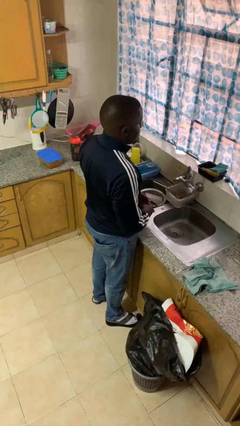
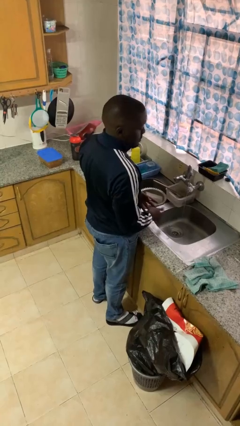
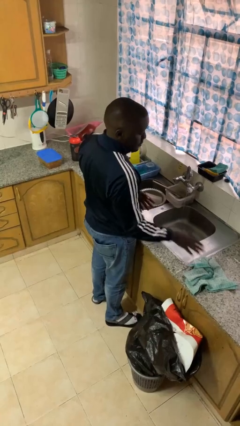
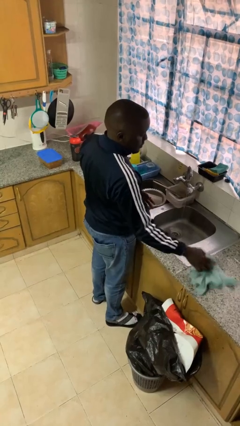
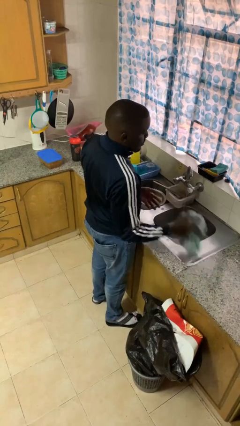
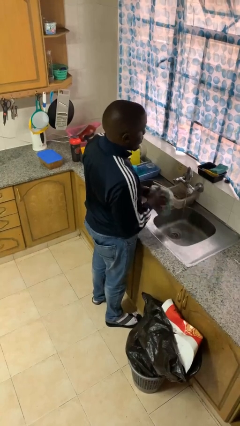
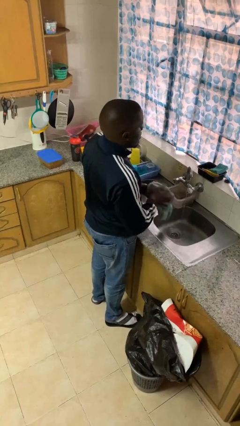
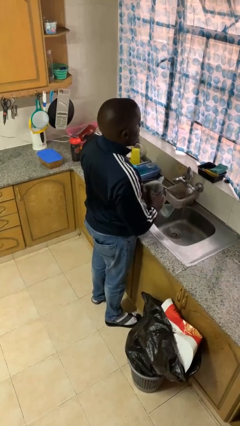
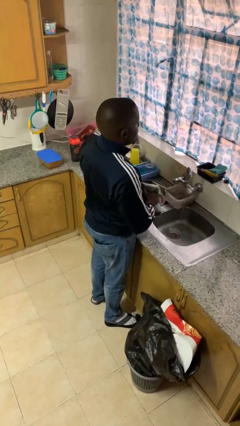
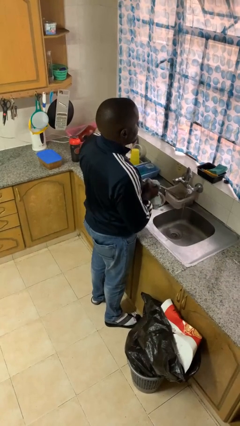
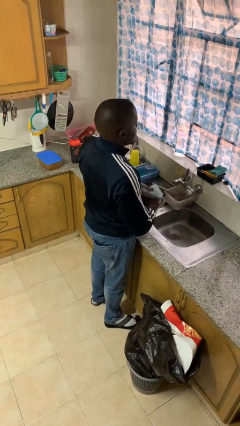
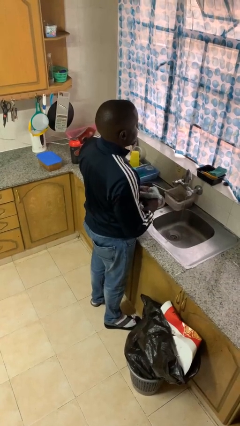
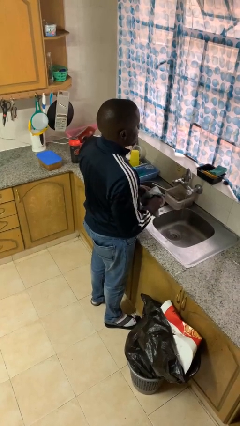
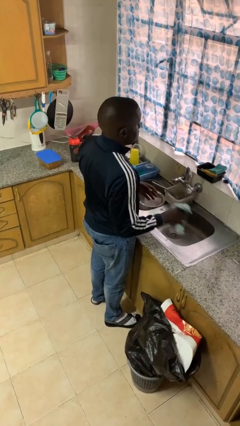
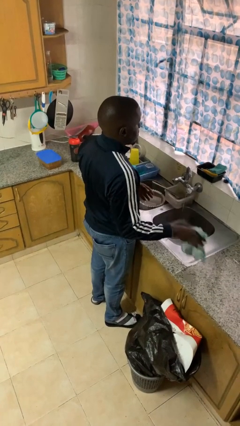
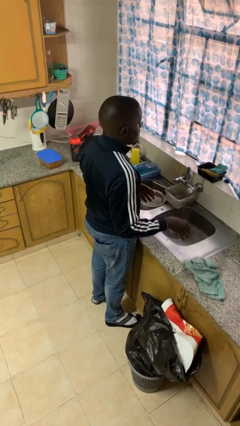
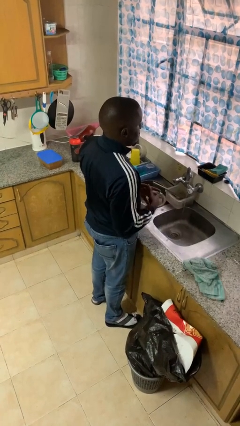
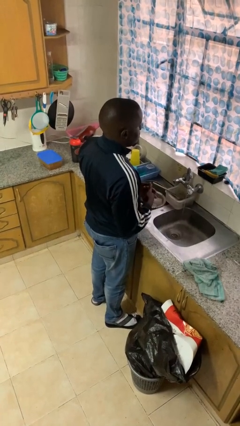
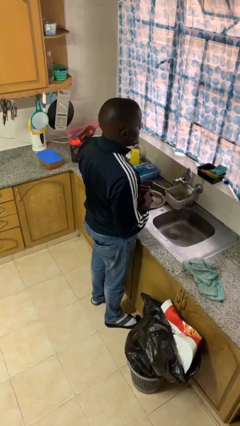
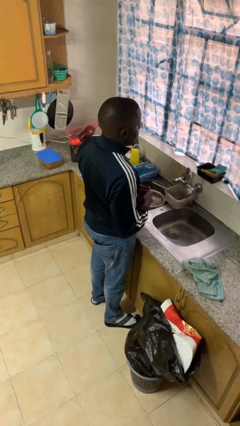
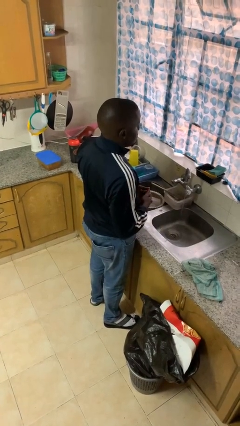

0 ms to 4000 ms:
person dries hands with towel

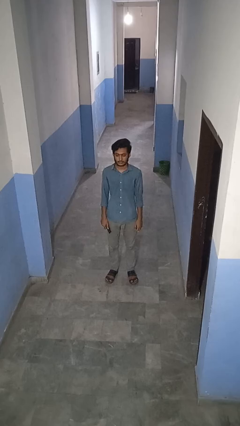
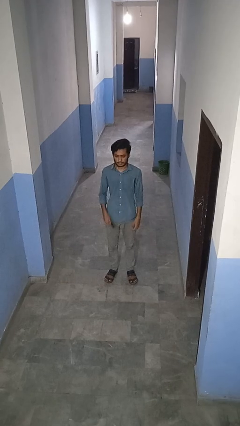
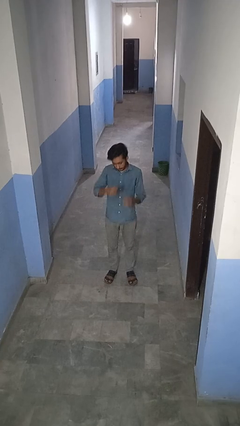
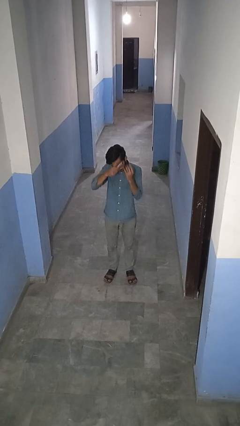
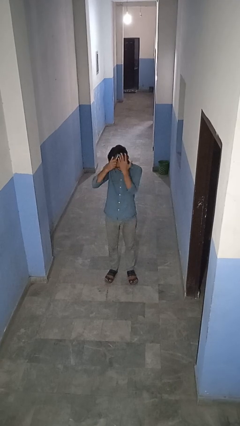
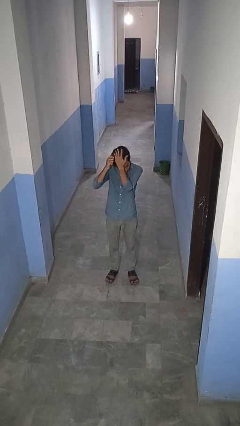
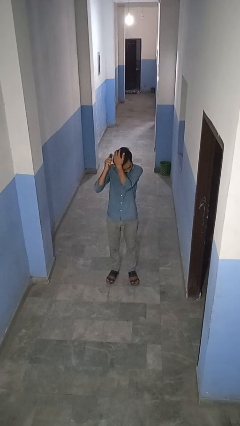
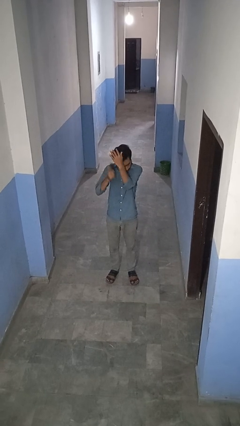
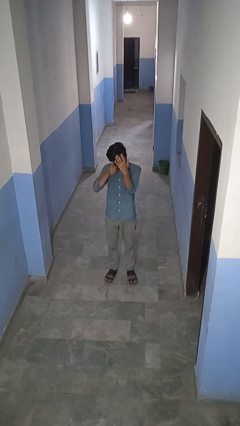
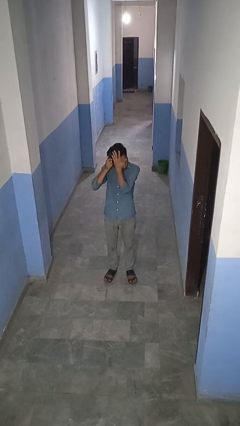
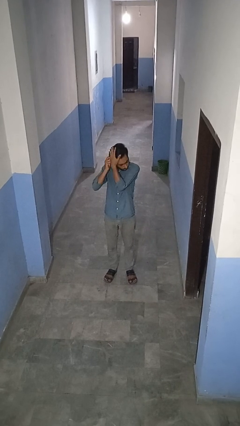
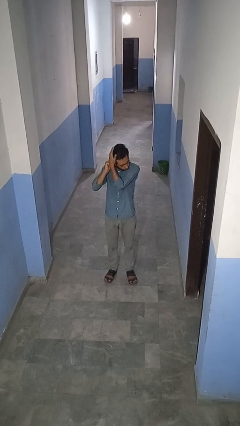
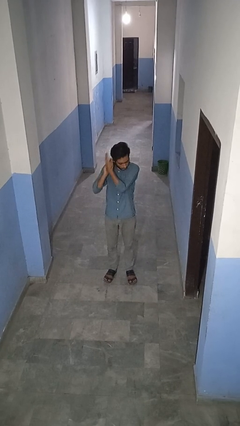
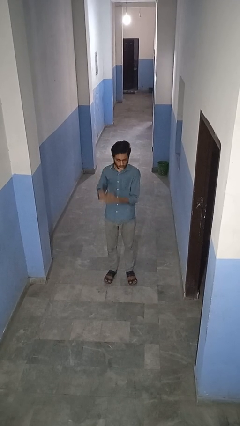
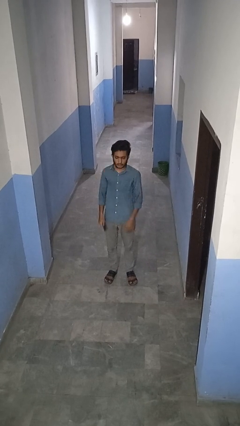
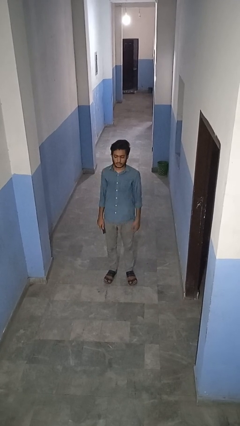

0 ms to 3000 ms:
person brushes hair

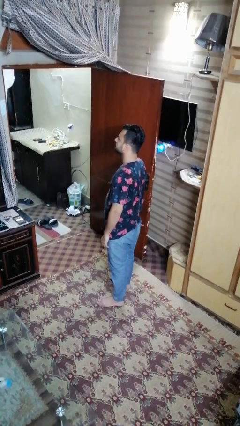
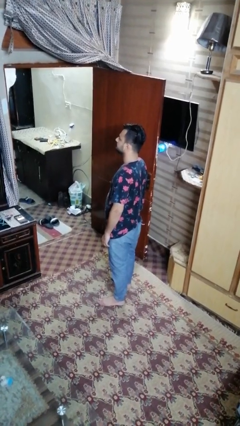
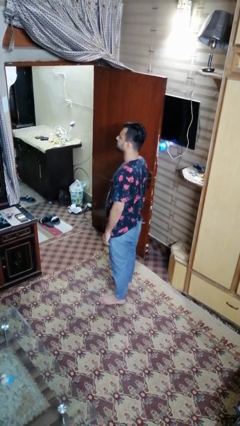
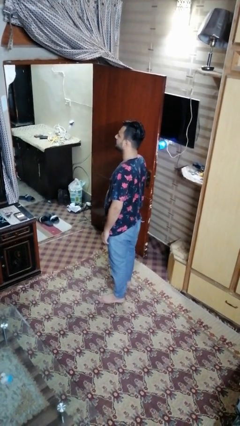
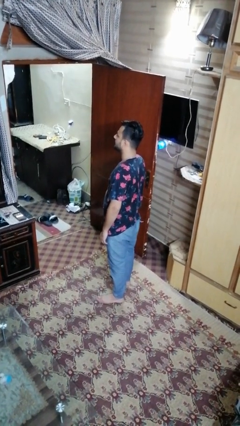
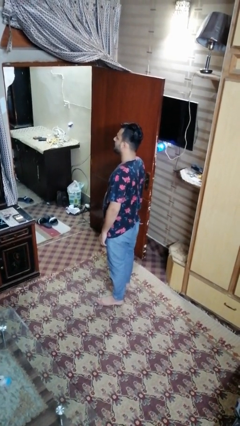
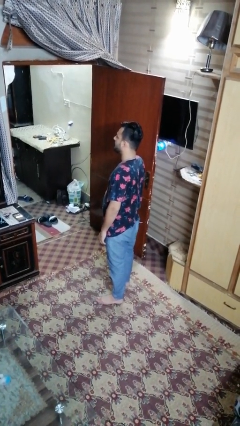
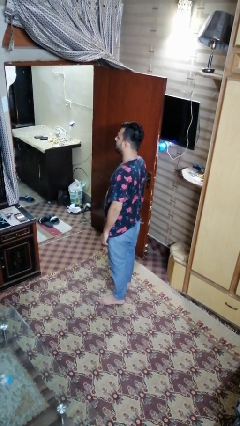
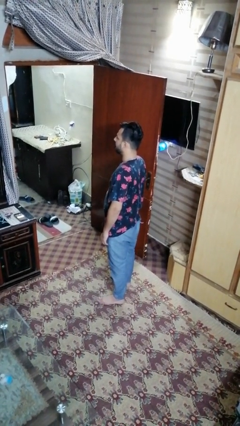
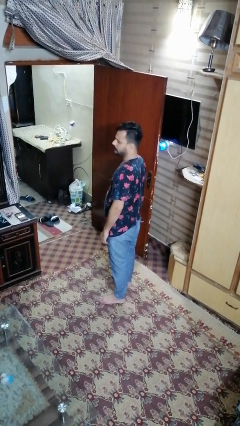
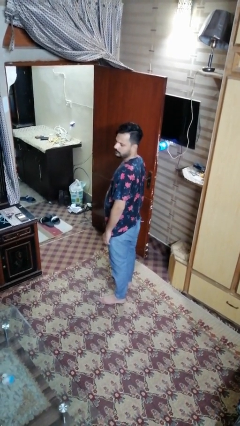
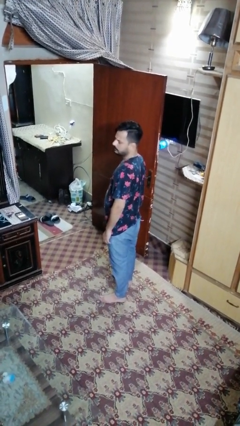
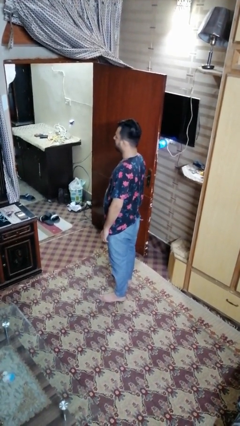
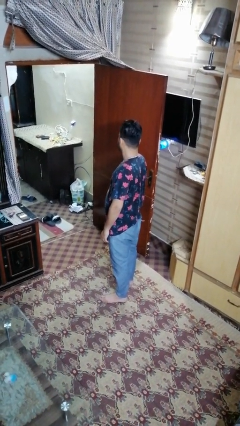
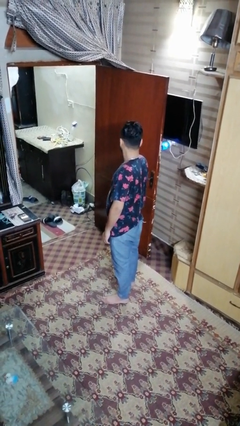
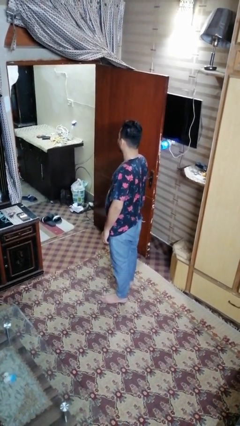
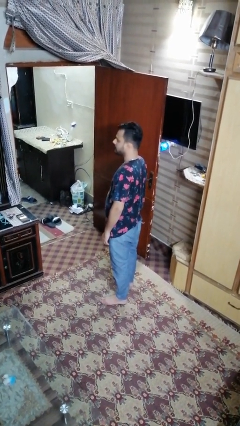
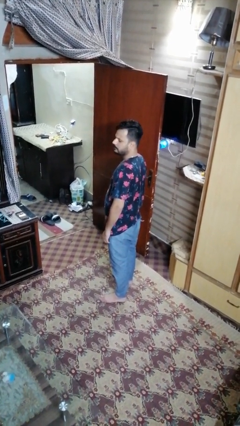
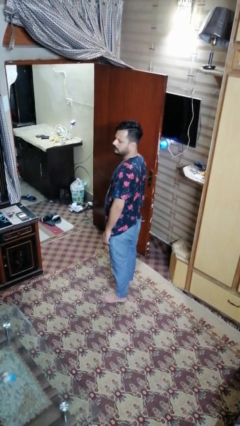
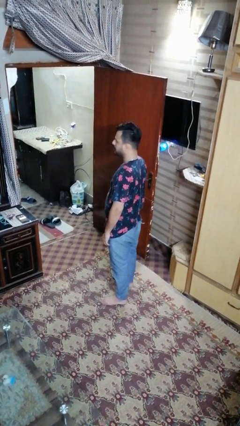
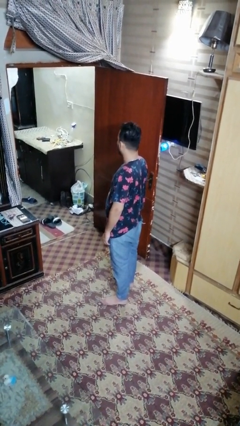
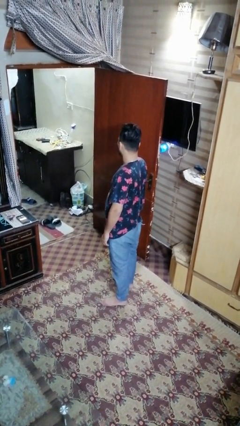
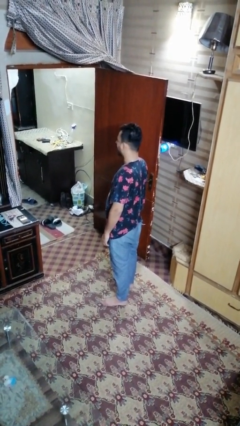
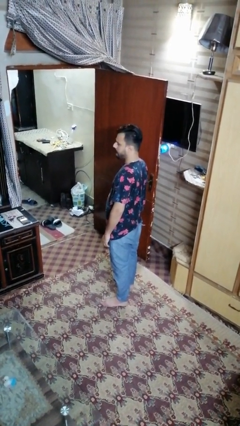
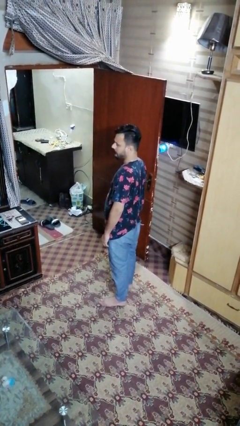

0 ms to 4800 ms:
person shakes head

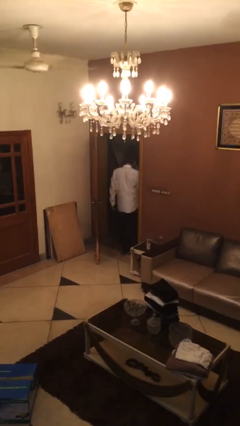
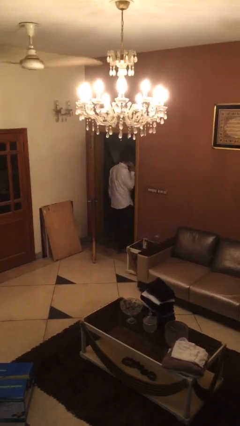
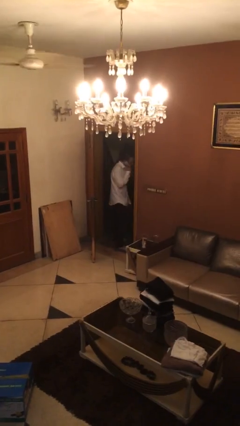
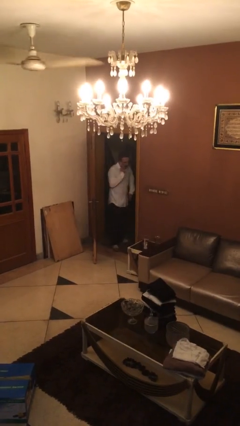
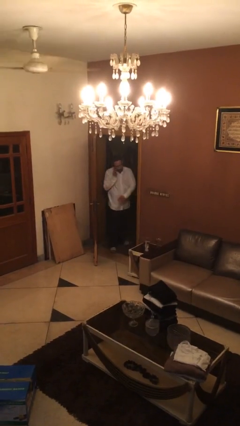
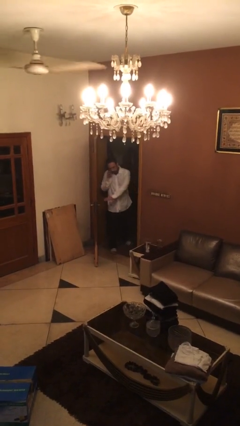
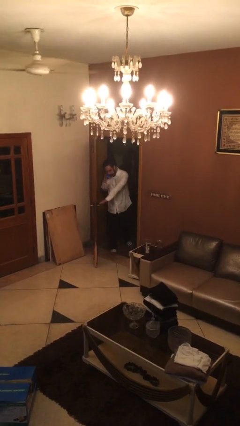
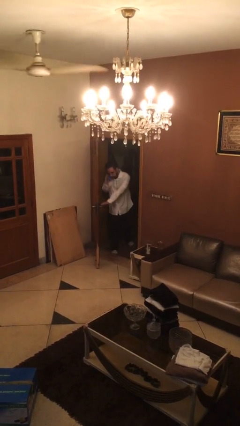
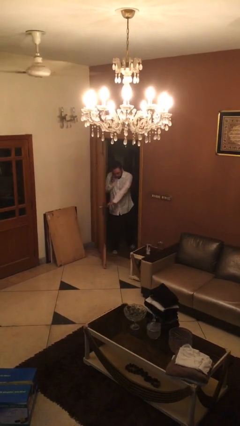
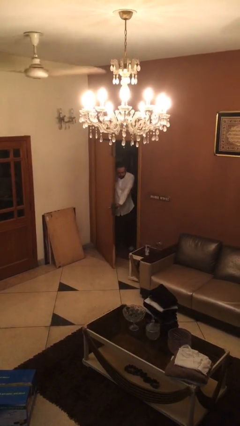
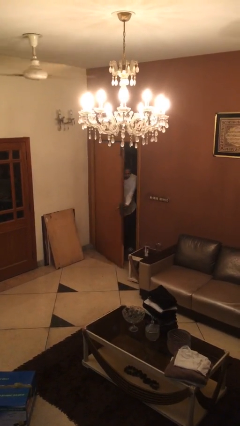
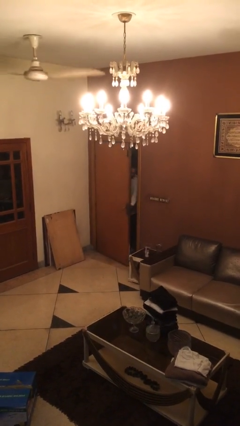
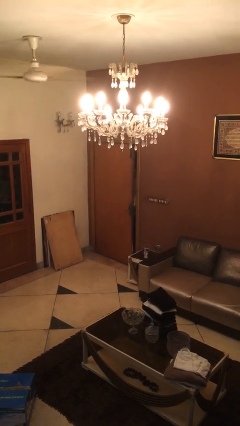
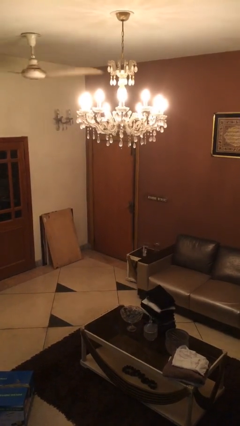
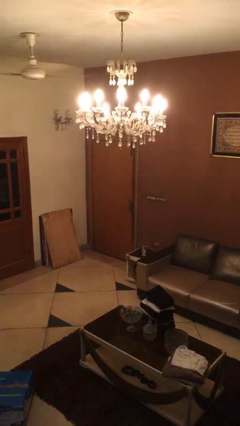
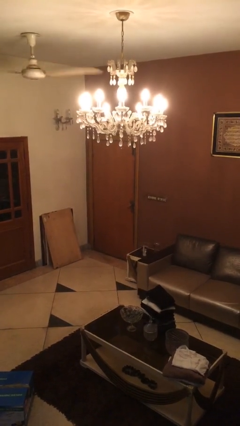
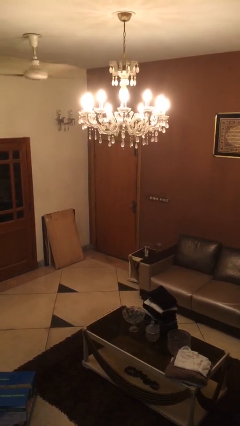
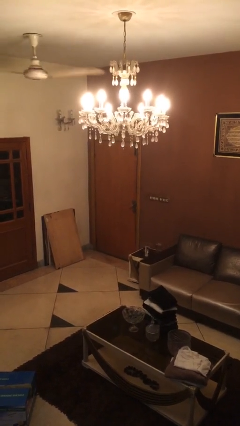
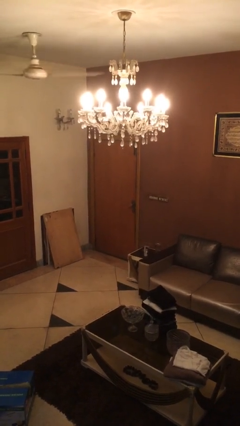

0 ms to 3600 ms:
person closes facility door

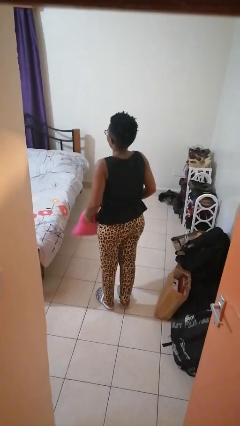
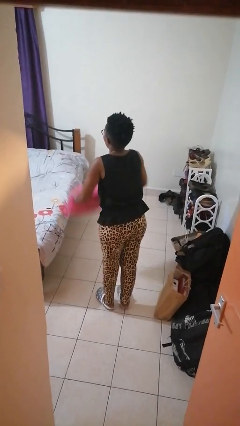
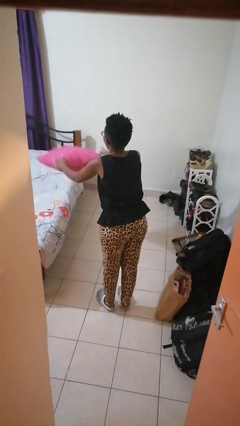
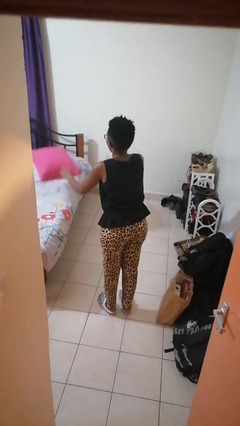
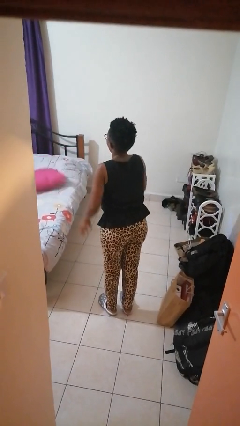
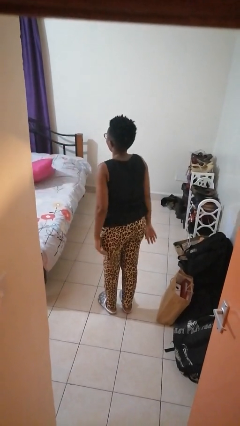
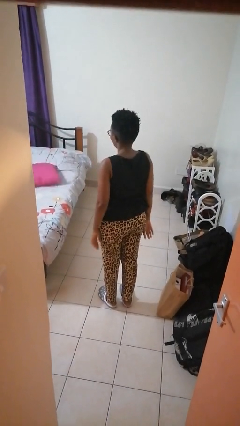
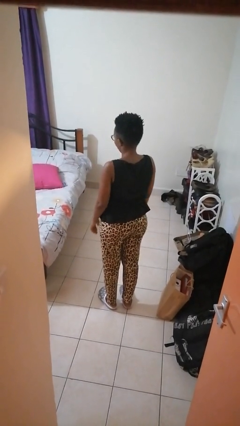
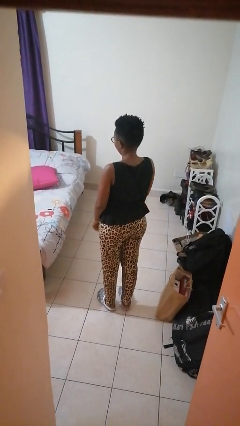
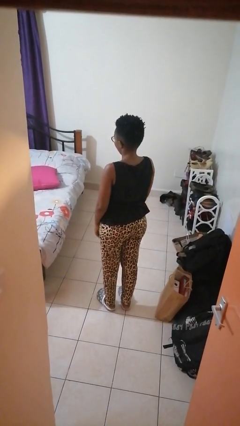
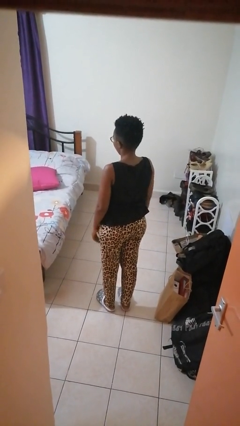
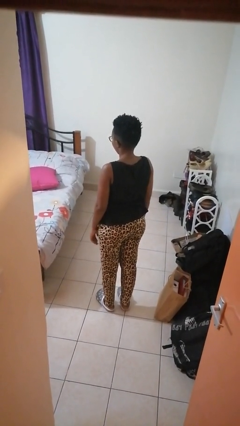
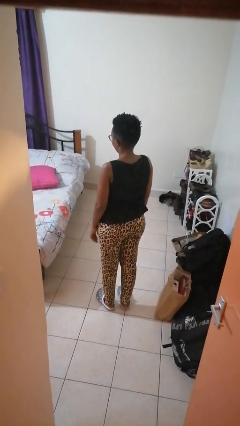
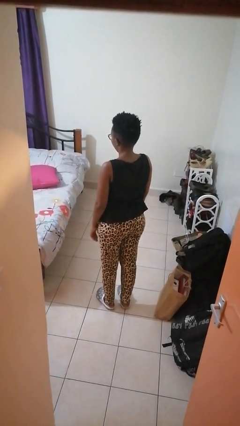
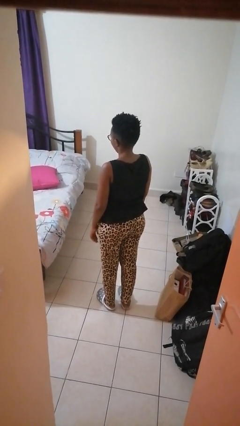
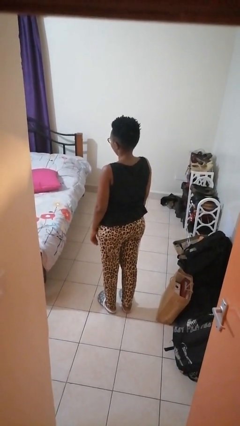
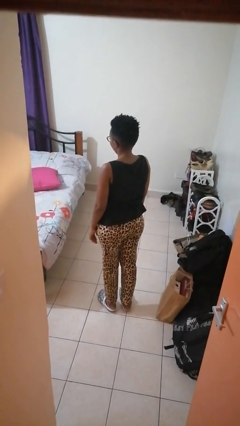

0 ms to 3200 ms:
person throws object on bed
